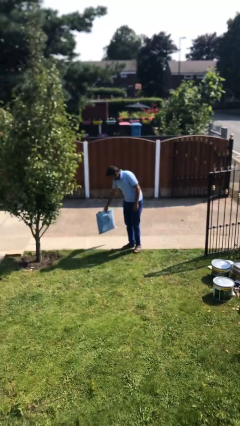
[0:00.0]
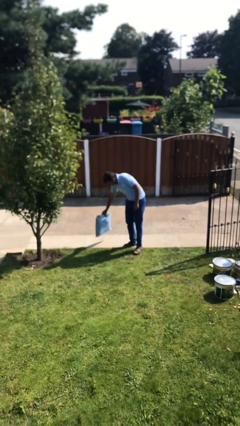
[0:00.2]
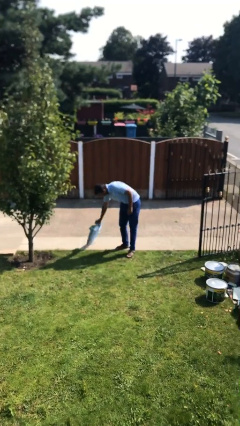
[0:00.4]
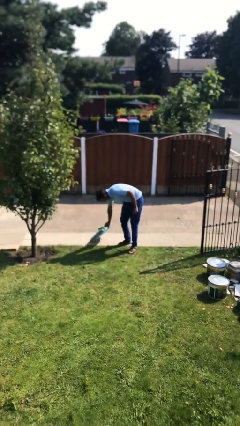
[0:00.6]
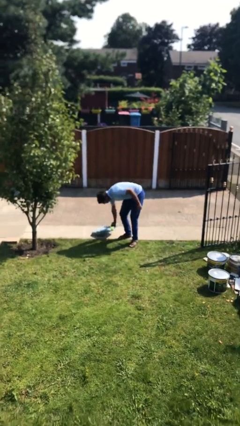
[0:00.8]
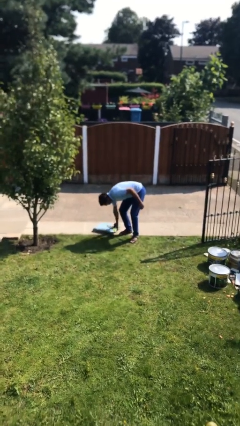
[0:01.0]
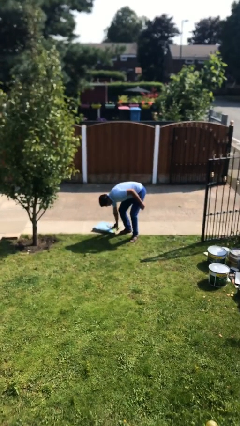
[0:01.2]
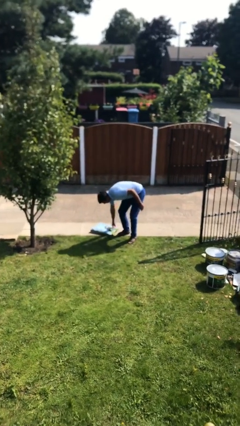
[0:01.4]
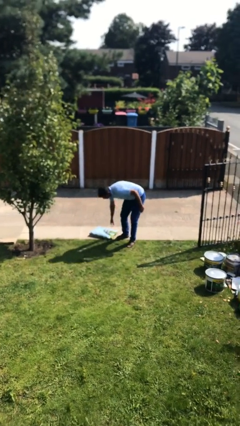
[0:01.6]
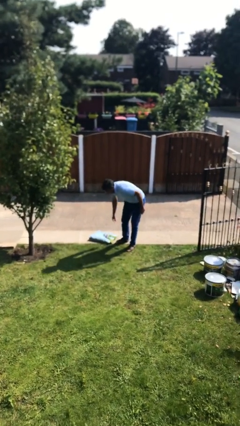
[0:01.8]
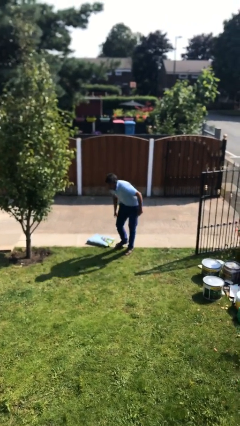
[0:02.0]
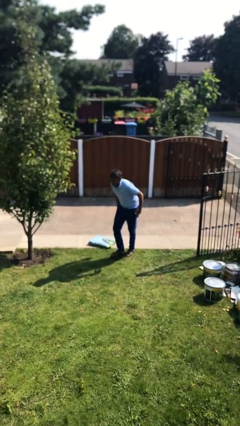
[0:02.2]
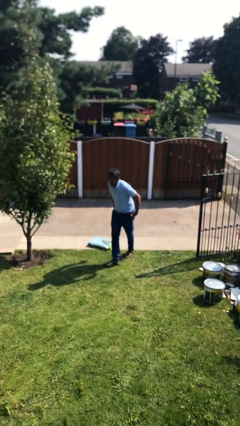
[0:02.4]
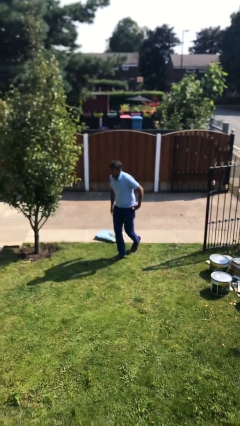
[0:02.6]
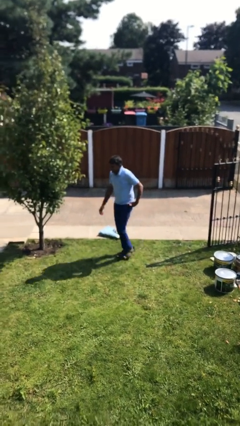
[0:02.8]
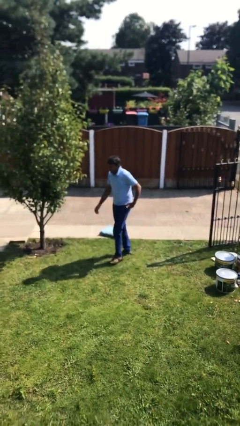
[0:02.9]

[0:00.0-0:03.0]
person puts down object on floor

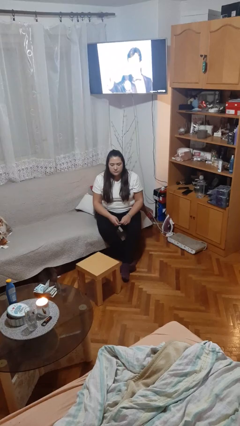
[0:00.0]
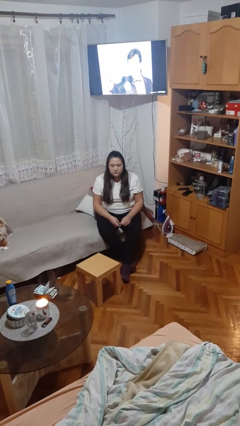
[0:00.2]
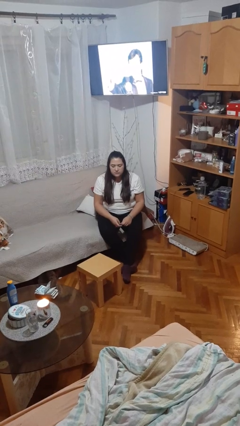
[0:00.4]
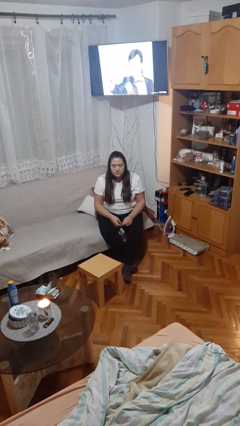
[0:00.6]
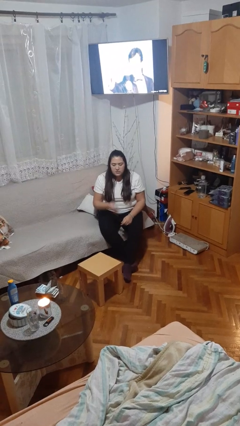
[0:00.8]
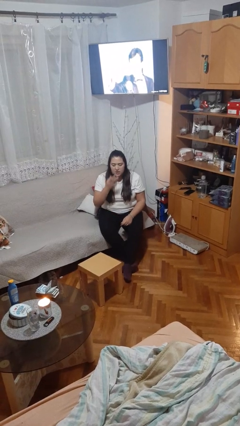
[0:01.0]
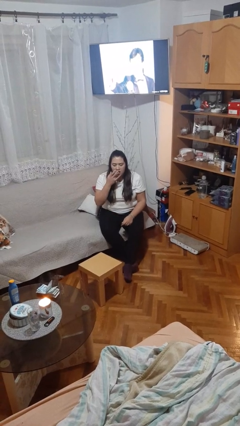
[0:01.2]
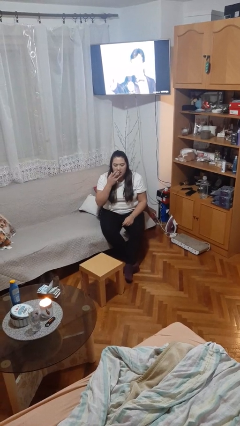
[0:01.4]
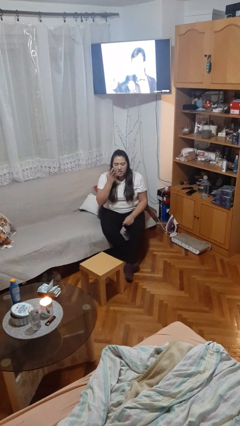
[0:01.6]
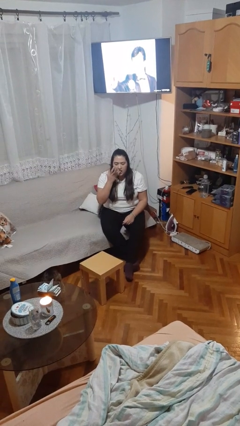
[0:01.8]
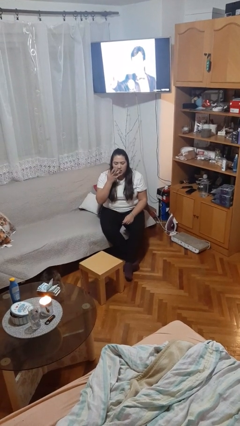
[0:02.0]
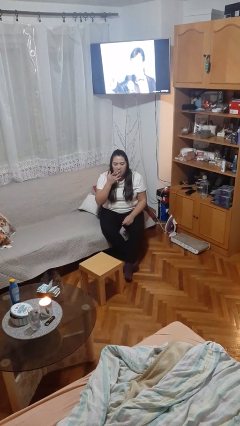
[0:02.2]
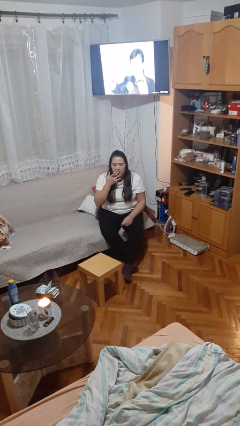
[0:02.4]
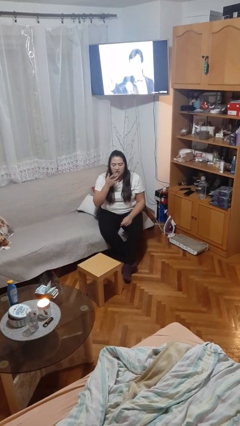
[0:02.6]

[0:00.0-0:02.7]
person licks fingers

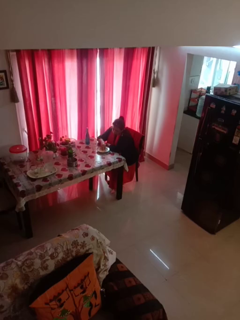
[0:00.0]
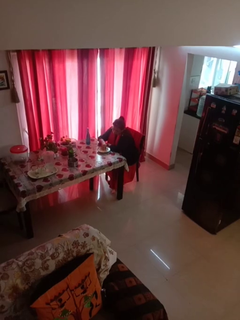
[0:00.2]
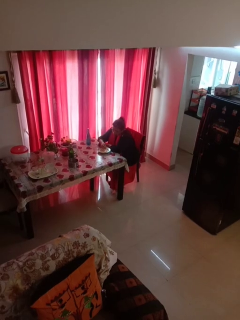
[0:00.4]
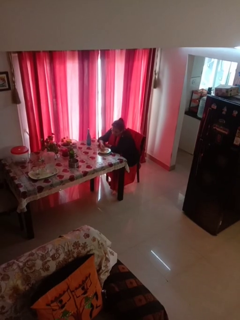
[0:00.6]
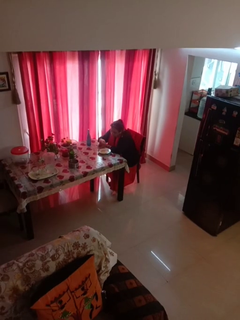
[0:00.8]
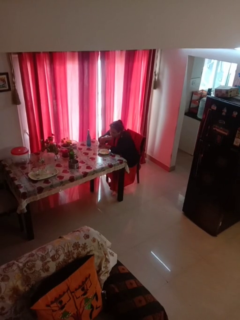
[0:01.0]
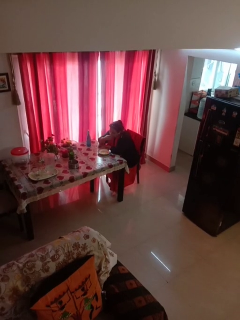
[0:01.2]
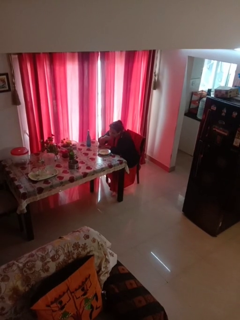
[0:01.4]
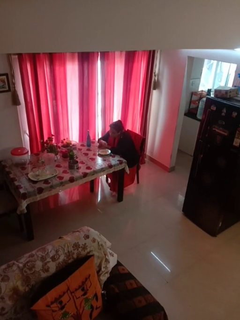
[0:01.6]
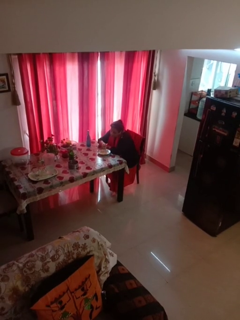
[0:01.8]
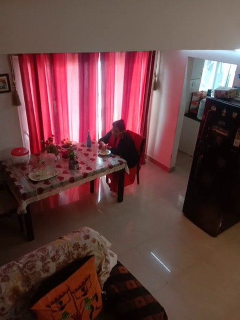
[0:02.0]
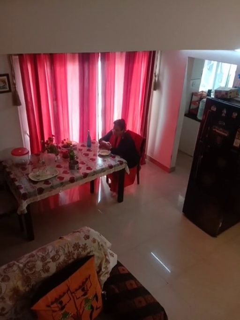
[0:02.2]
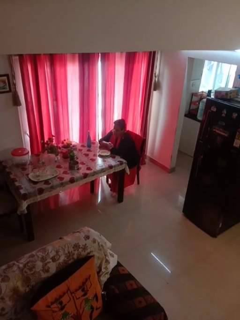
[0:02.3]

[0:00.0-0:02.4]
person eats with hands

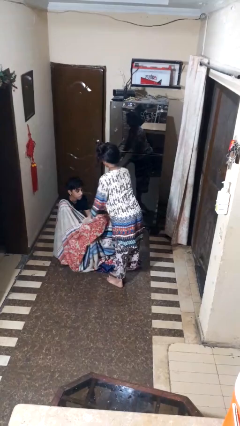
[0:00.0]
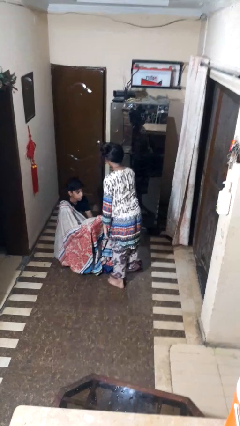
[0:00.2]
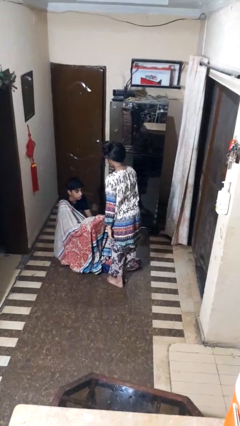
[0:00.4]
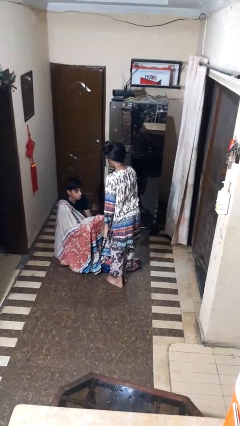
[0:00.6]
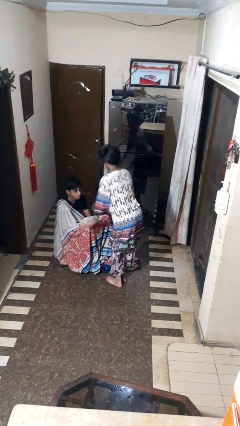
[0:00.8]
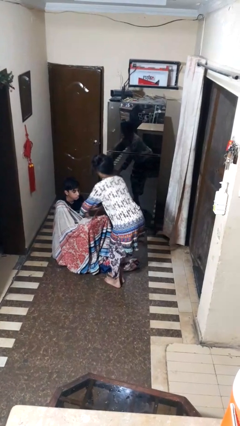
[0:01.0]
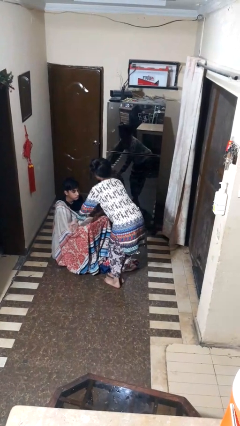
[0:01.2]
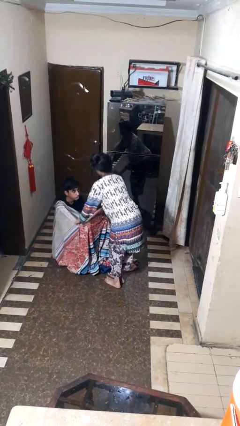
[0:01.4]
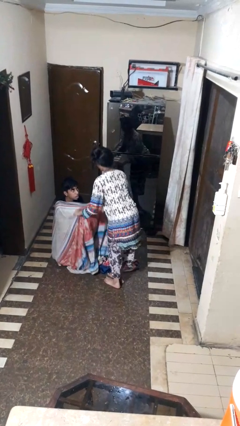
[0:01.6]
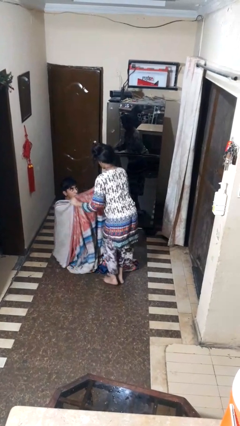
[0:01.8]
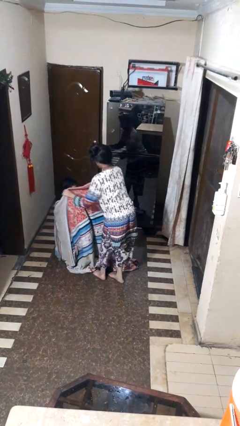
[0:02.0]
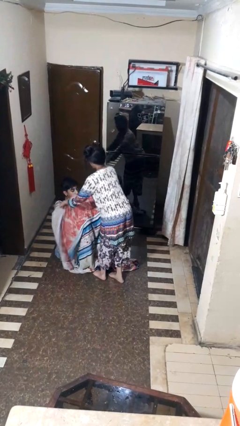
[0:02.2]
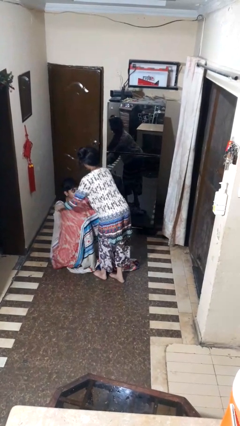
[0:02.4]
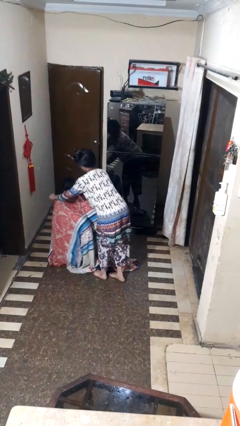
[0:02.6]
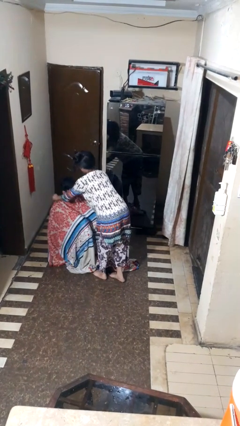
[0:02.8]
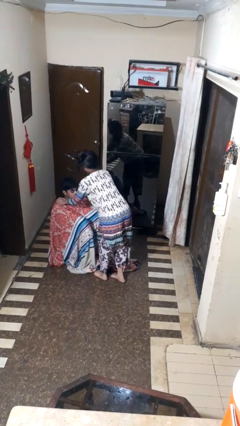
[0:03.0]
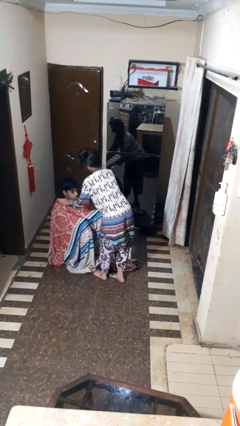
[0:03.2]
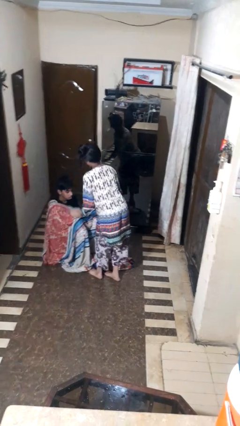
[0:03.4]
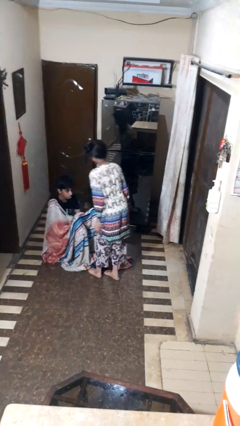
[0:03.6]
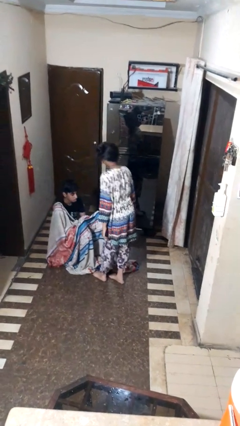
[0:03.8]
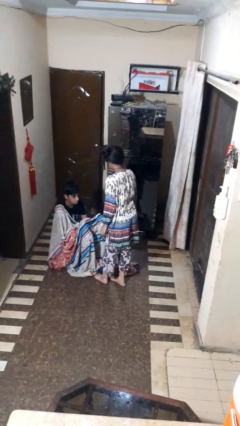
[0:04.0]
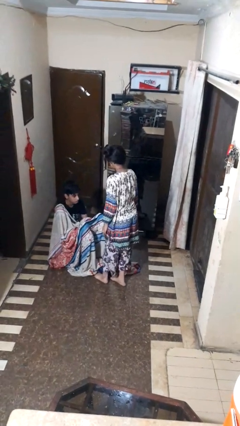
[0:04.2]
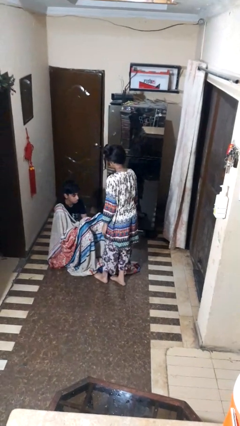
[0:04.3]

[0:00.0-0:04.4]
person covers friend with blanket

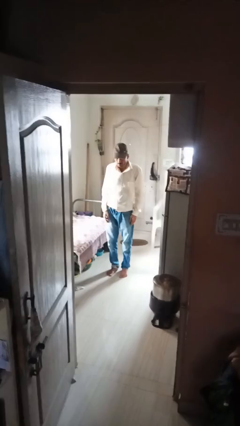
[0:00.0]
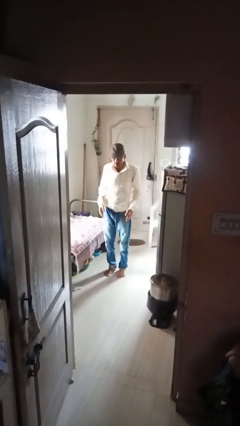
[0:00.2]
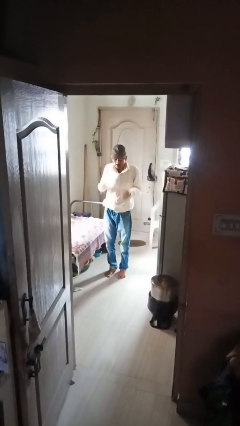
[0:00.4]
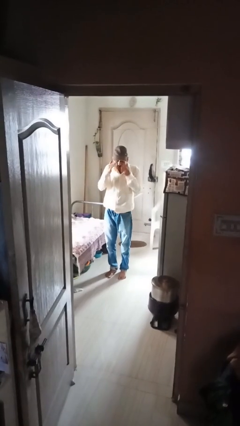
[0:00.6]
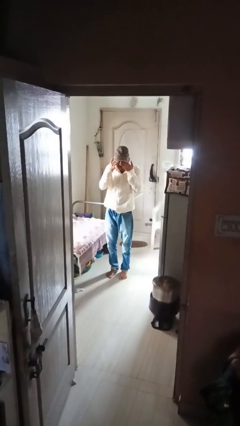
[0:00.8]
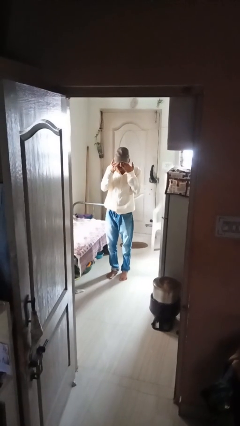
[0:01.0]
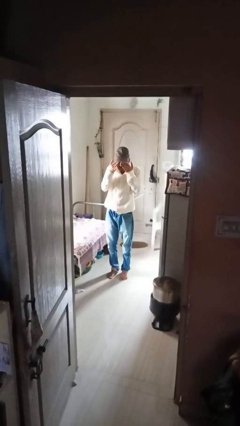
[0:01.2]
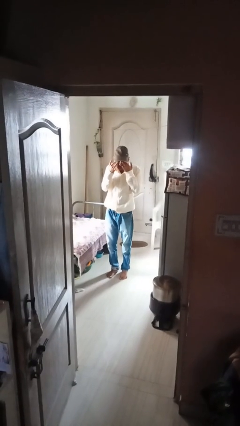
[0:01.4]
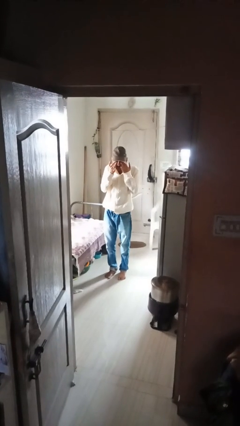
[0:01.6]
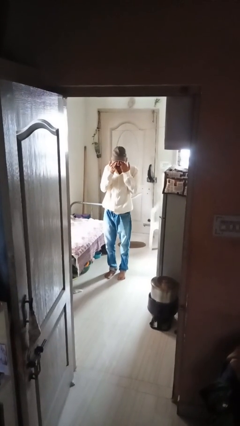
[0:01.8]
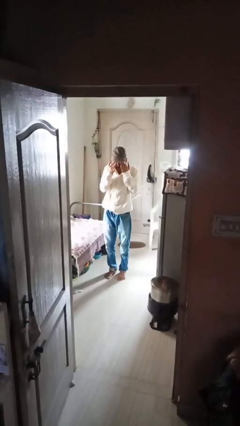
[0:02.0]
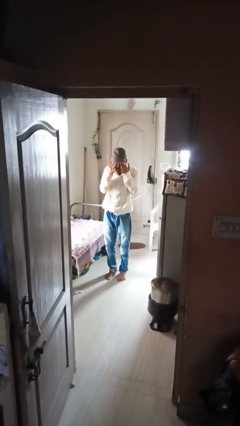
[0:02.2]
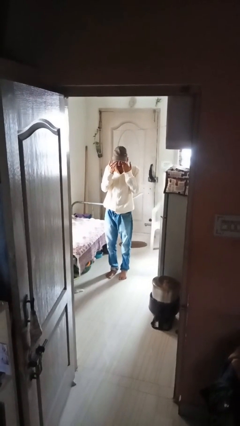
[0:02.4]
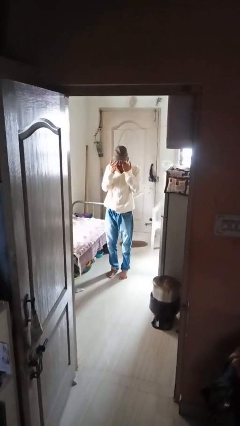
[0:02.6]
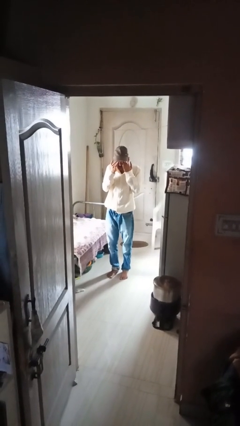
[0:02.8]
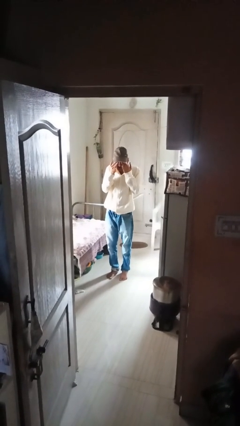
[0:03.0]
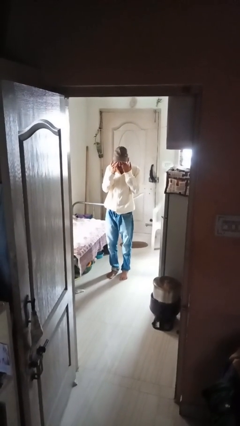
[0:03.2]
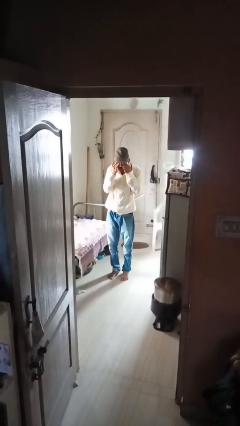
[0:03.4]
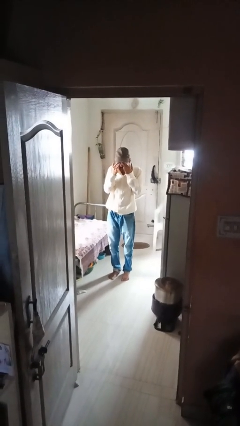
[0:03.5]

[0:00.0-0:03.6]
person rubs eyes

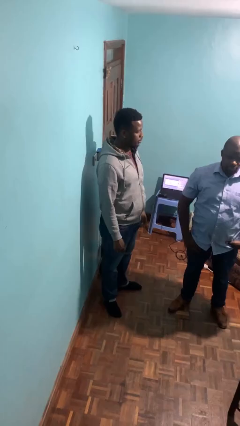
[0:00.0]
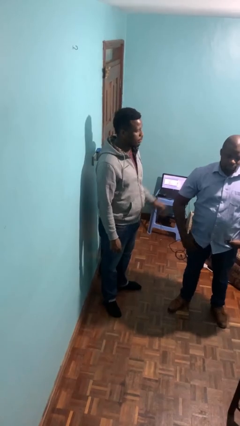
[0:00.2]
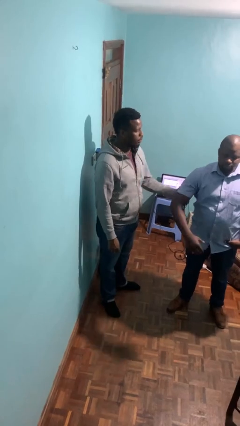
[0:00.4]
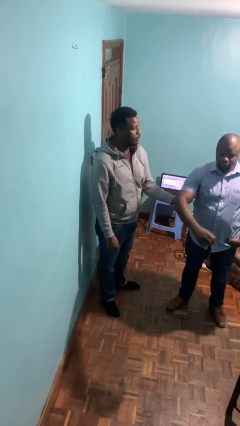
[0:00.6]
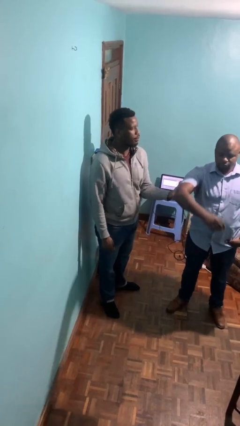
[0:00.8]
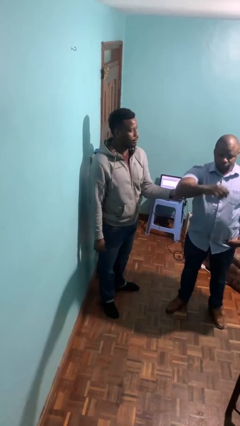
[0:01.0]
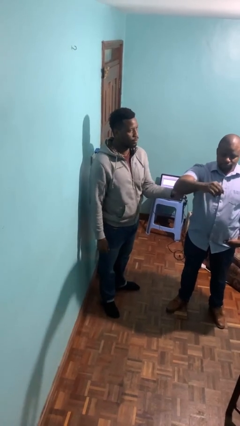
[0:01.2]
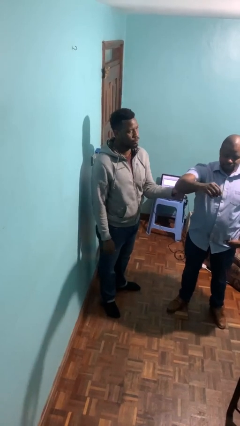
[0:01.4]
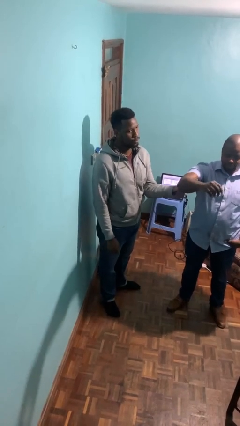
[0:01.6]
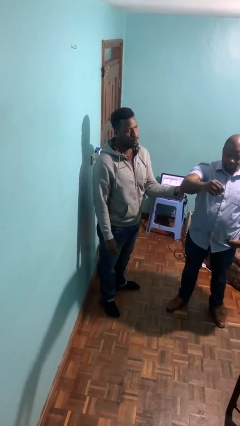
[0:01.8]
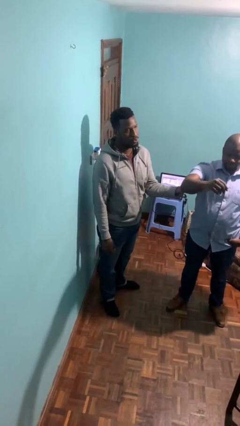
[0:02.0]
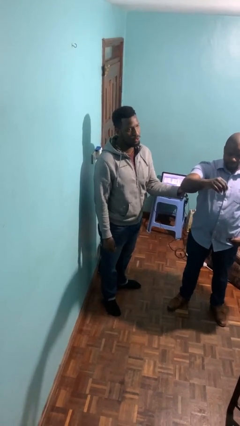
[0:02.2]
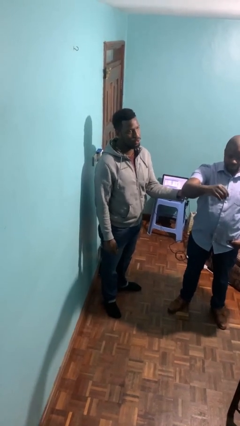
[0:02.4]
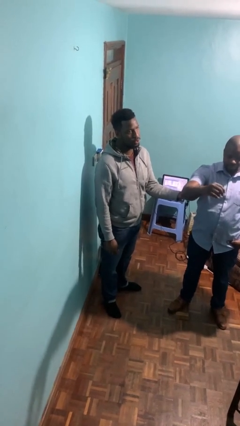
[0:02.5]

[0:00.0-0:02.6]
person grabs person by bicep
